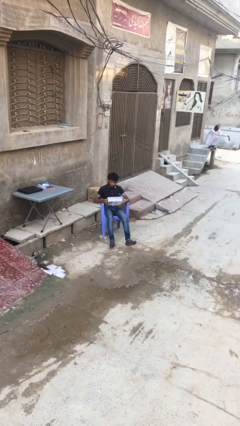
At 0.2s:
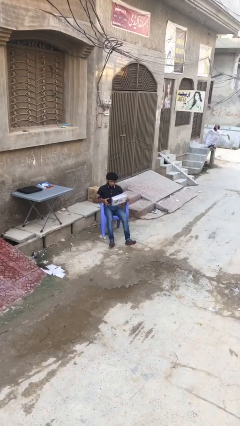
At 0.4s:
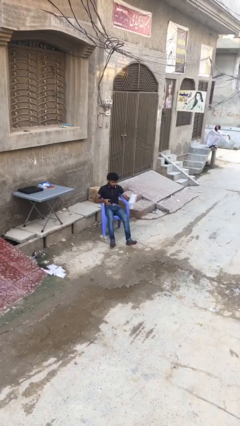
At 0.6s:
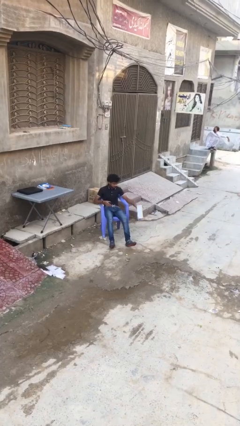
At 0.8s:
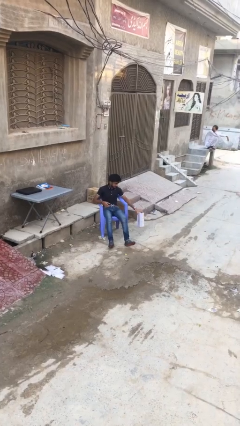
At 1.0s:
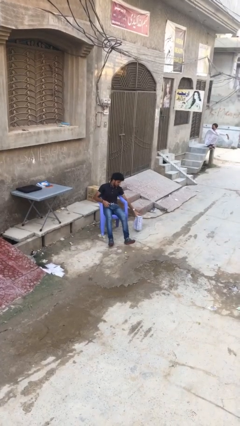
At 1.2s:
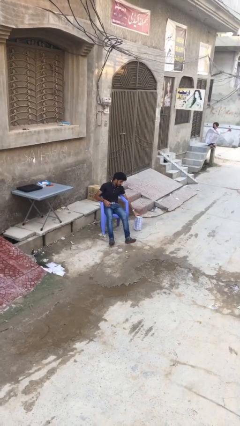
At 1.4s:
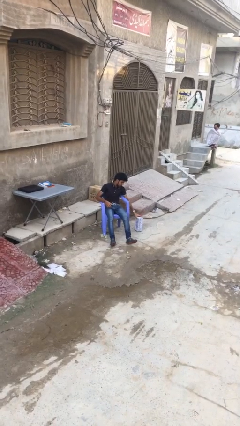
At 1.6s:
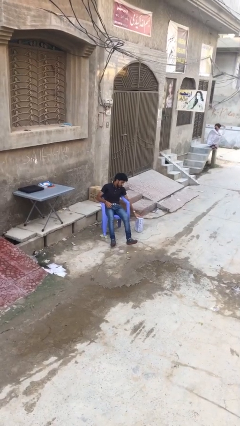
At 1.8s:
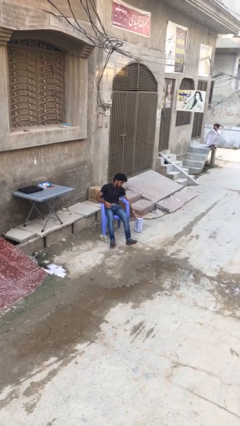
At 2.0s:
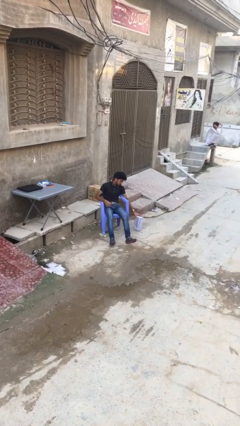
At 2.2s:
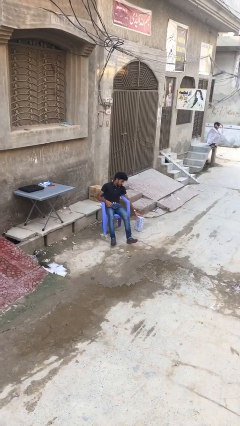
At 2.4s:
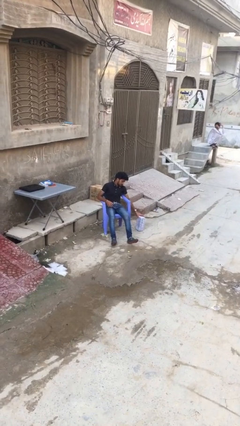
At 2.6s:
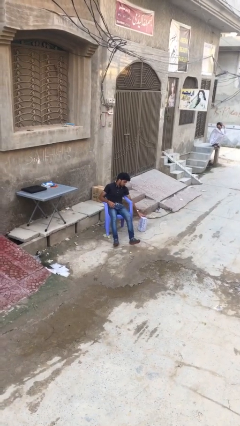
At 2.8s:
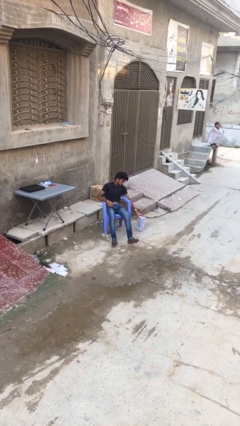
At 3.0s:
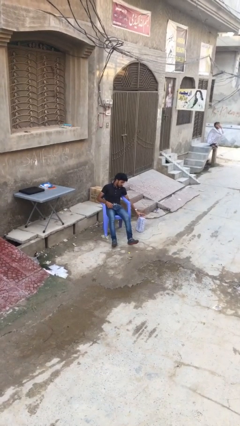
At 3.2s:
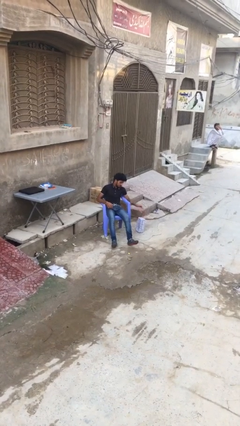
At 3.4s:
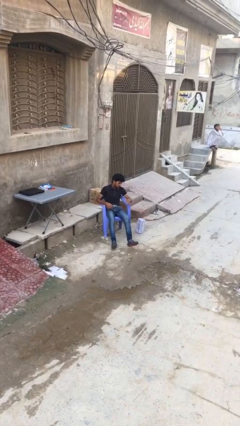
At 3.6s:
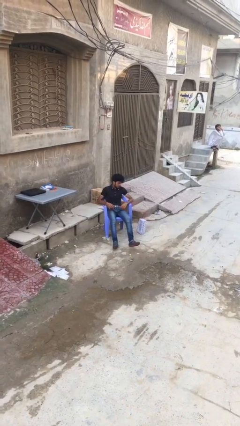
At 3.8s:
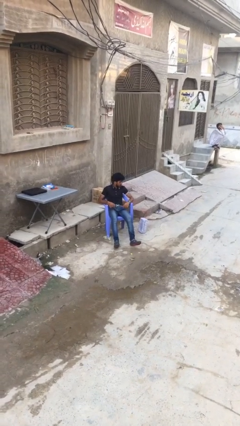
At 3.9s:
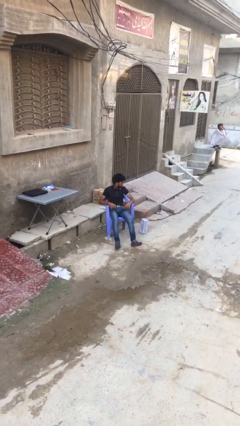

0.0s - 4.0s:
person puts down object on floor

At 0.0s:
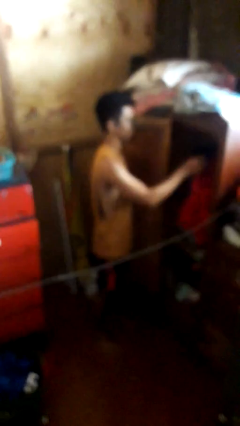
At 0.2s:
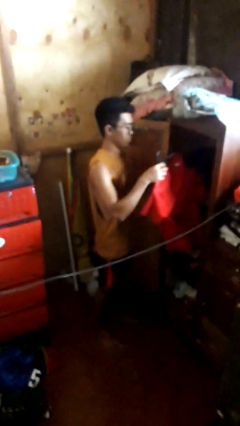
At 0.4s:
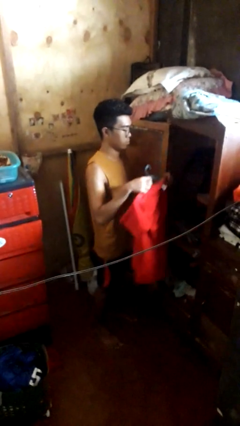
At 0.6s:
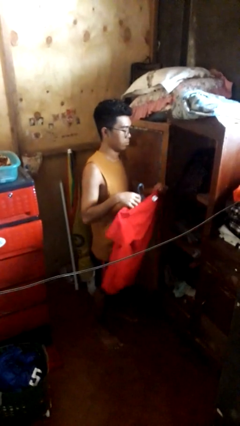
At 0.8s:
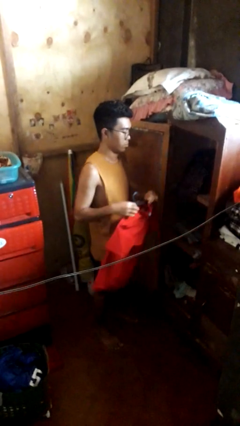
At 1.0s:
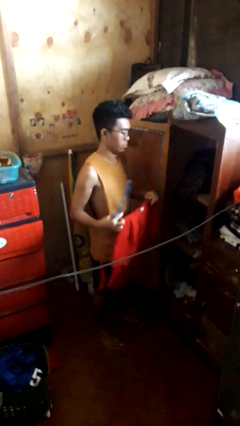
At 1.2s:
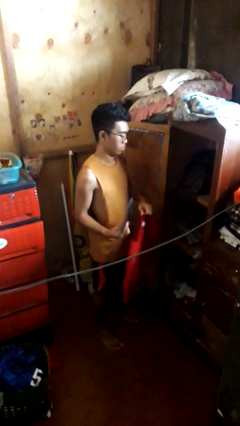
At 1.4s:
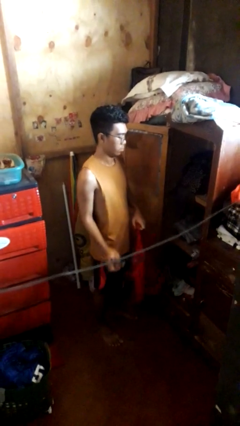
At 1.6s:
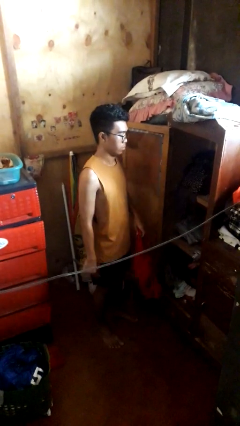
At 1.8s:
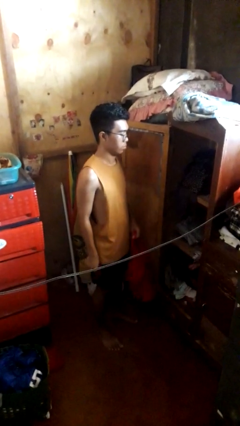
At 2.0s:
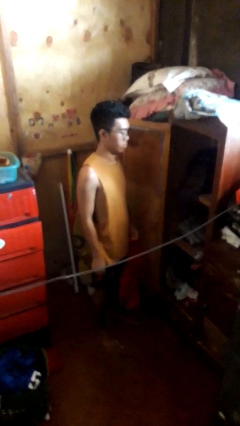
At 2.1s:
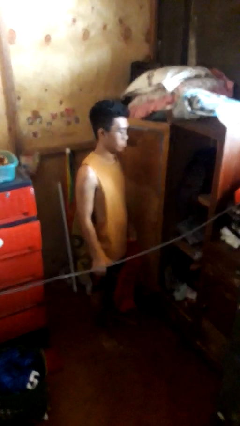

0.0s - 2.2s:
person takes clothes from closet

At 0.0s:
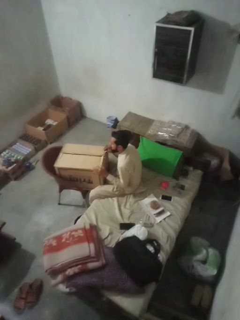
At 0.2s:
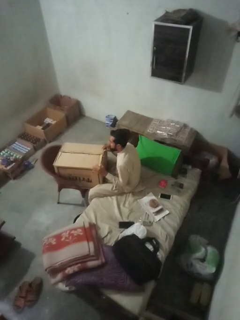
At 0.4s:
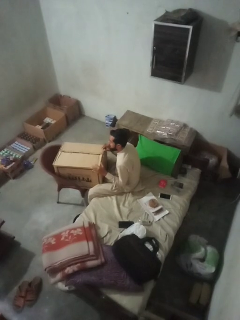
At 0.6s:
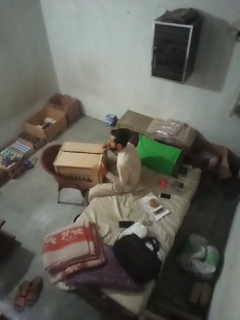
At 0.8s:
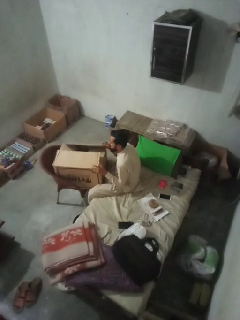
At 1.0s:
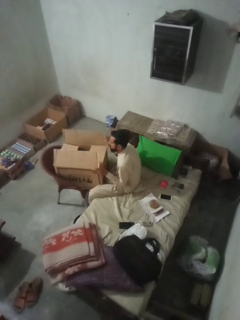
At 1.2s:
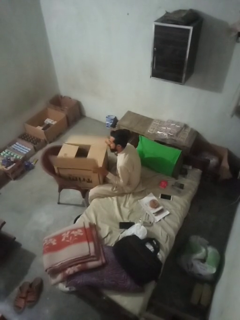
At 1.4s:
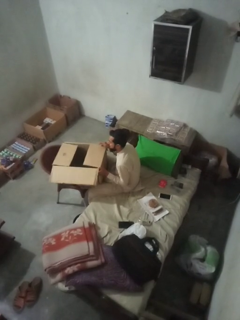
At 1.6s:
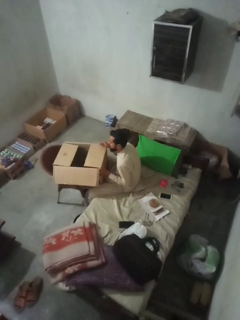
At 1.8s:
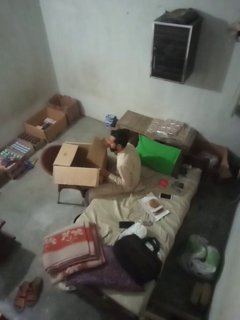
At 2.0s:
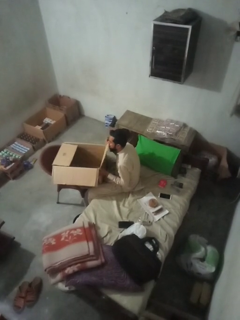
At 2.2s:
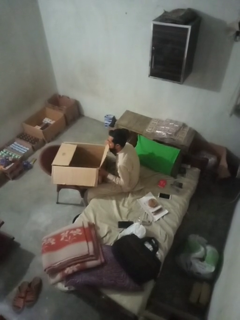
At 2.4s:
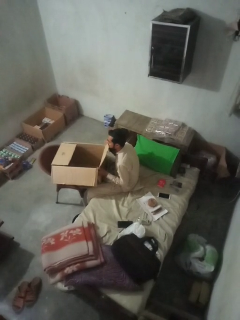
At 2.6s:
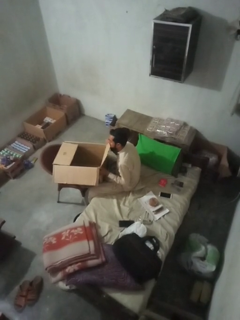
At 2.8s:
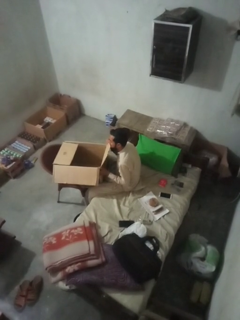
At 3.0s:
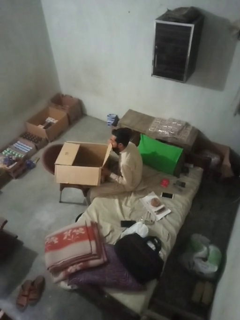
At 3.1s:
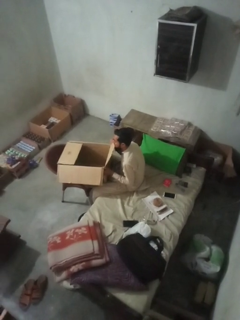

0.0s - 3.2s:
person opens box

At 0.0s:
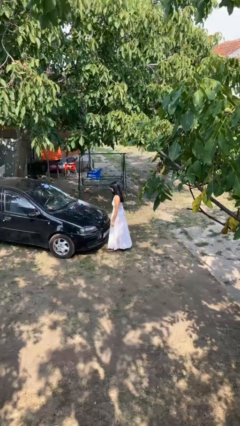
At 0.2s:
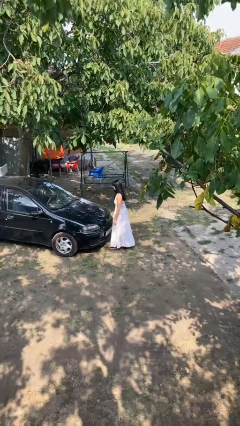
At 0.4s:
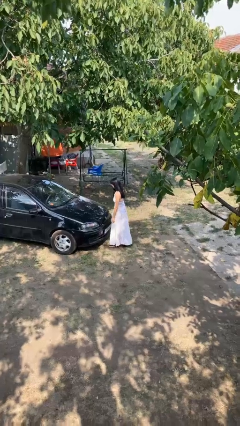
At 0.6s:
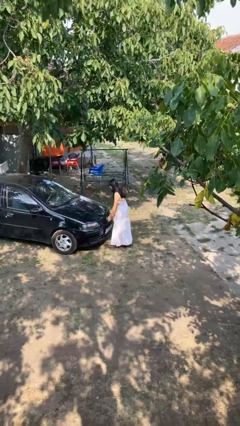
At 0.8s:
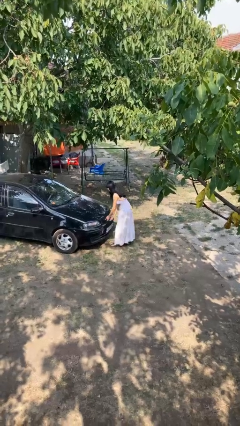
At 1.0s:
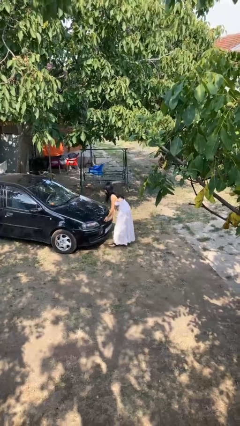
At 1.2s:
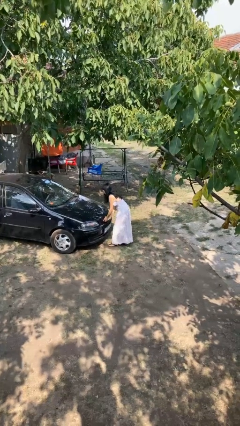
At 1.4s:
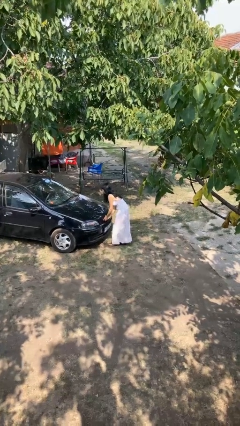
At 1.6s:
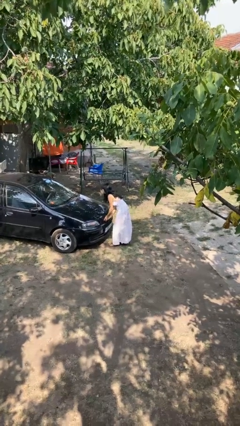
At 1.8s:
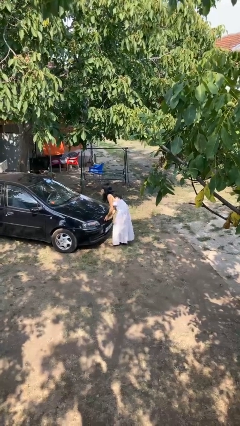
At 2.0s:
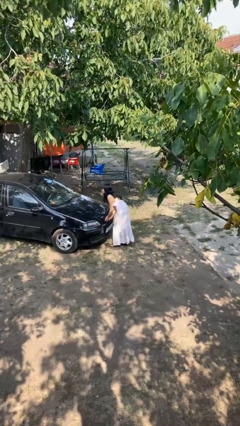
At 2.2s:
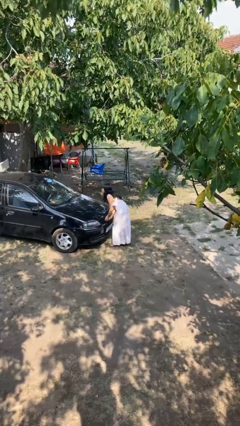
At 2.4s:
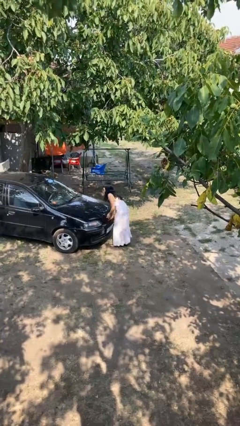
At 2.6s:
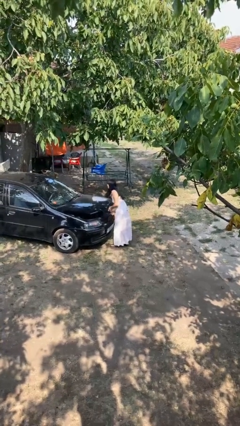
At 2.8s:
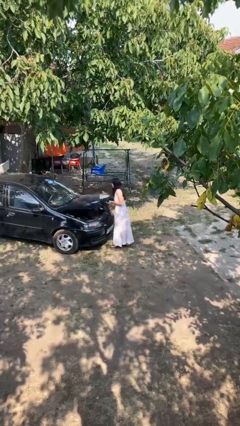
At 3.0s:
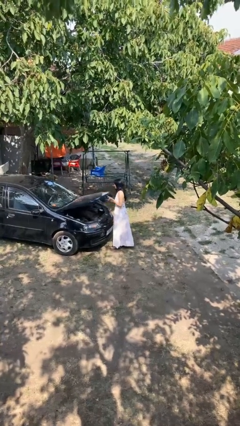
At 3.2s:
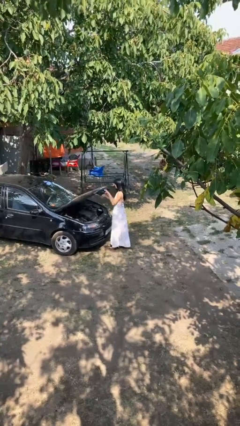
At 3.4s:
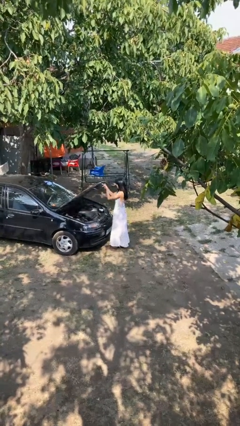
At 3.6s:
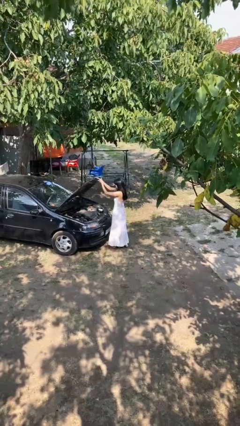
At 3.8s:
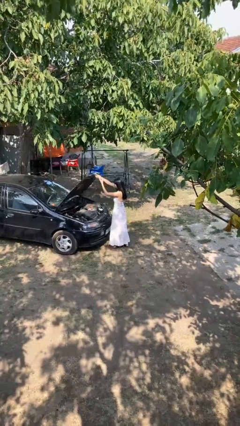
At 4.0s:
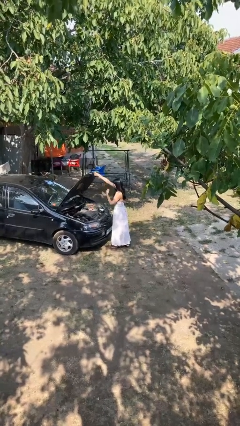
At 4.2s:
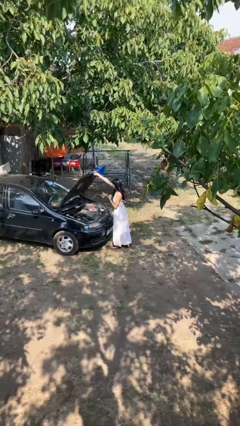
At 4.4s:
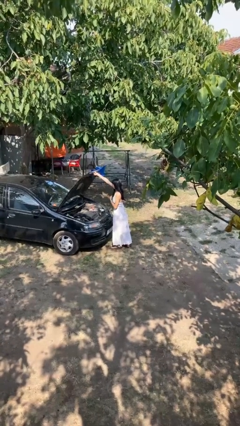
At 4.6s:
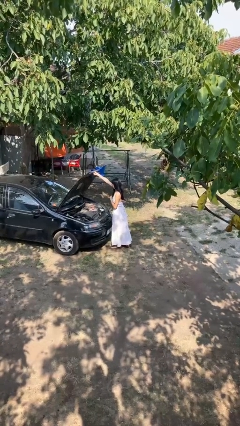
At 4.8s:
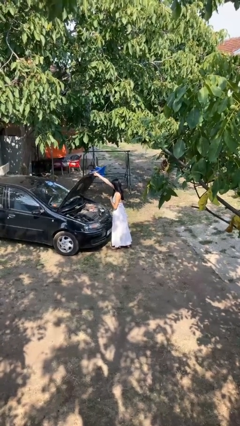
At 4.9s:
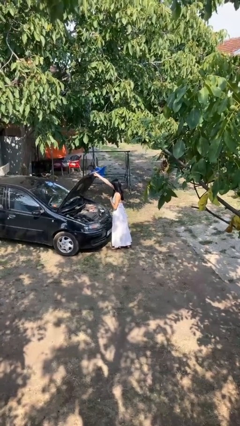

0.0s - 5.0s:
person opens car hood

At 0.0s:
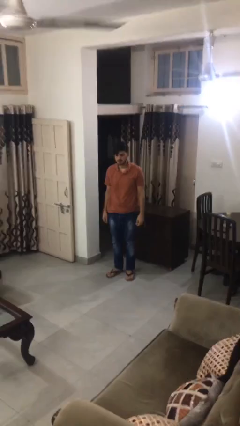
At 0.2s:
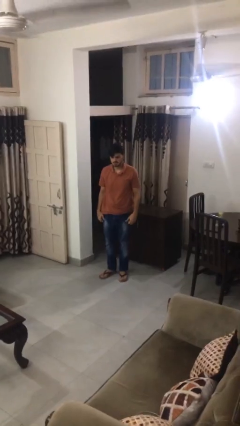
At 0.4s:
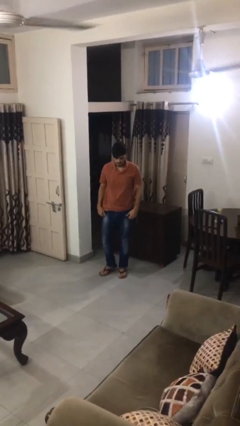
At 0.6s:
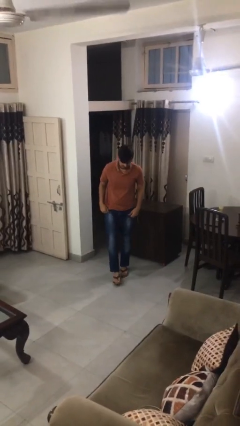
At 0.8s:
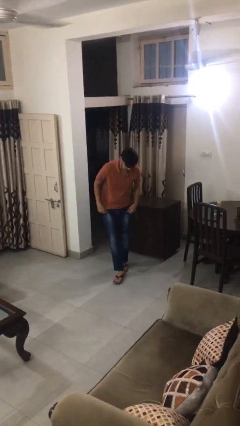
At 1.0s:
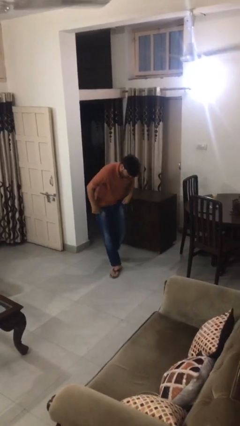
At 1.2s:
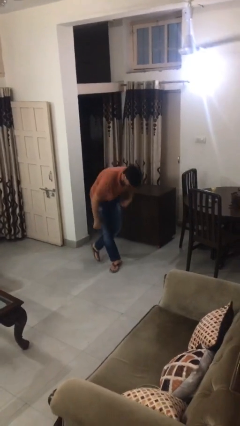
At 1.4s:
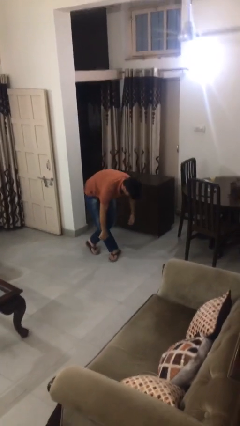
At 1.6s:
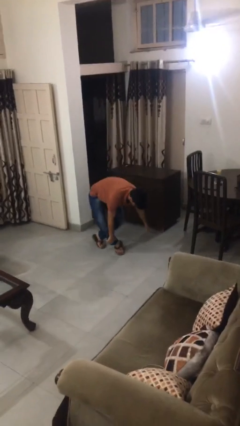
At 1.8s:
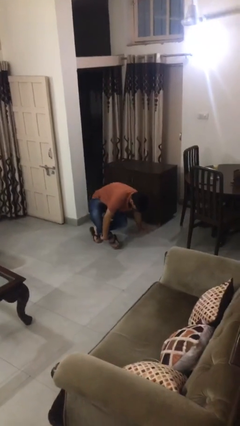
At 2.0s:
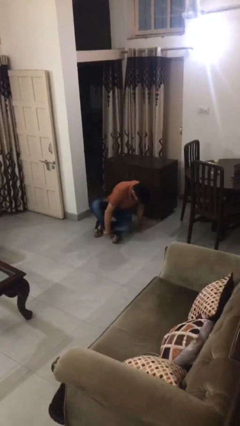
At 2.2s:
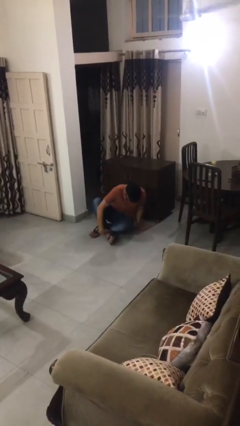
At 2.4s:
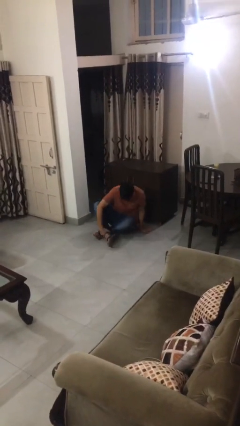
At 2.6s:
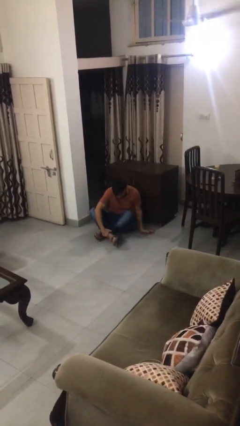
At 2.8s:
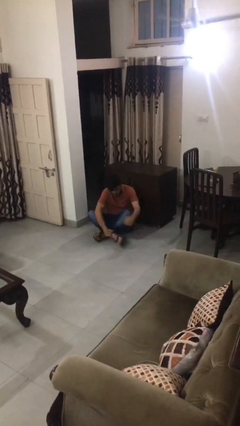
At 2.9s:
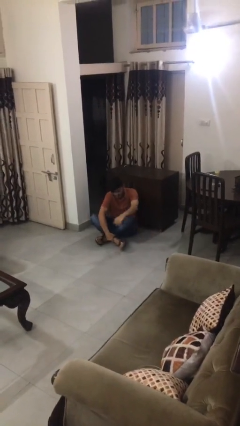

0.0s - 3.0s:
person sits crisscross

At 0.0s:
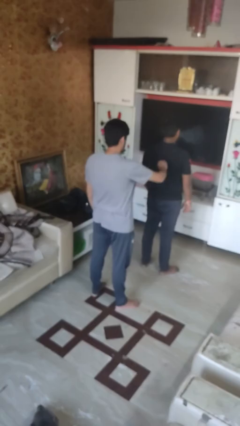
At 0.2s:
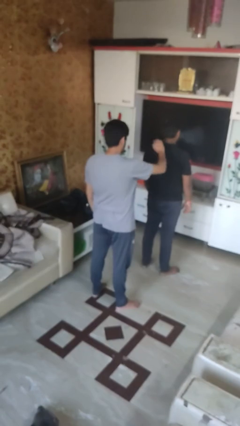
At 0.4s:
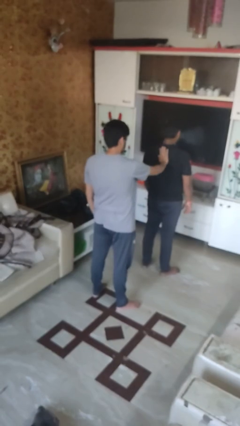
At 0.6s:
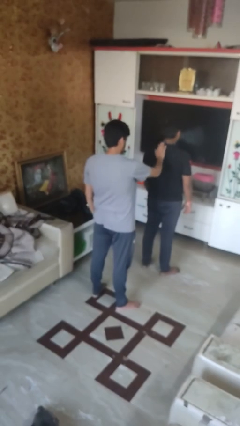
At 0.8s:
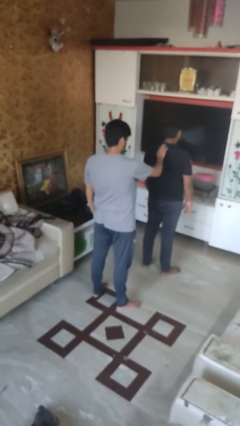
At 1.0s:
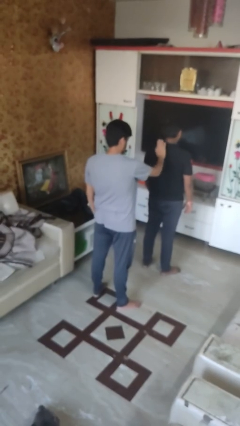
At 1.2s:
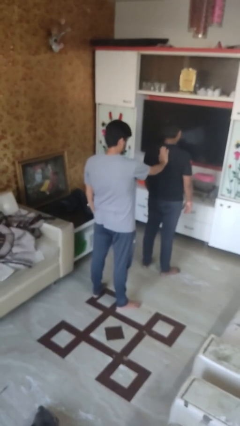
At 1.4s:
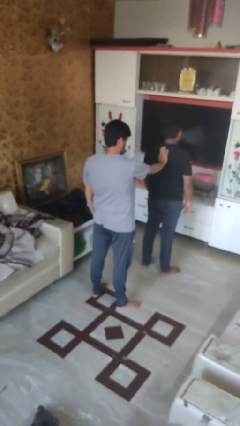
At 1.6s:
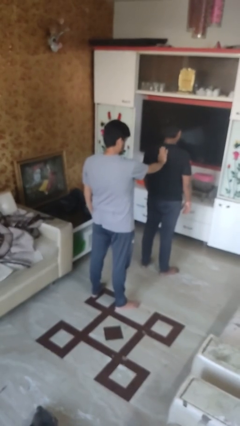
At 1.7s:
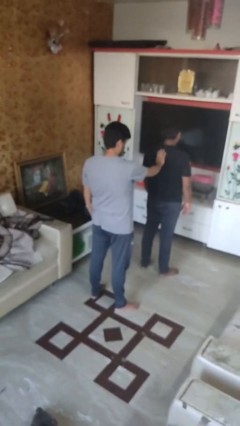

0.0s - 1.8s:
person touches back of person
